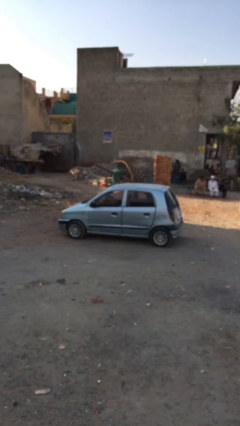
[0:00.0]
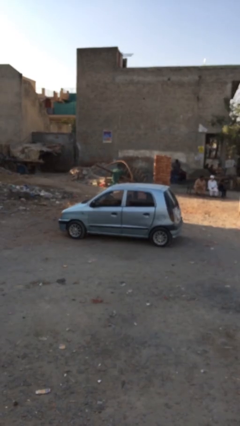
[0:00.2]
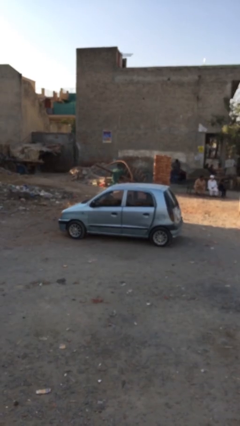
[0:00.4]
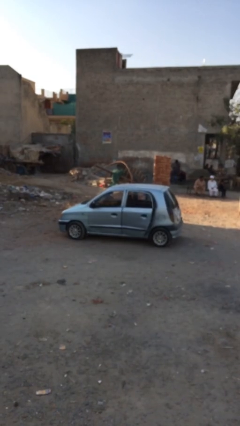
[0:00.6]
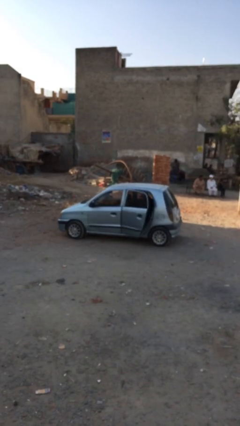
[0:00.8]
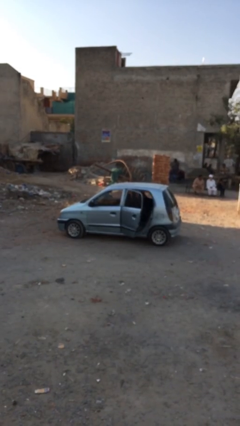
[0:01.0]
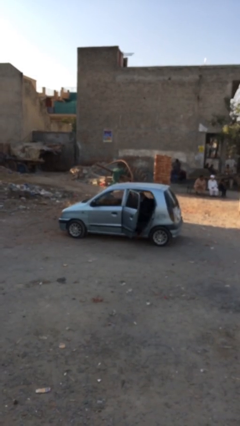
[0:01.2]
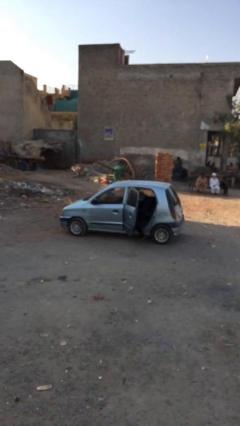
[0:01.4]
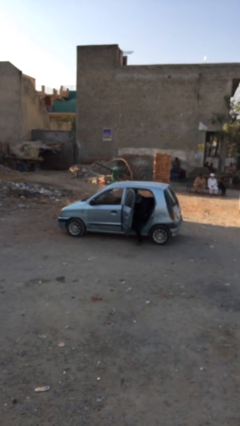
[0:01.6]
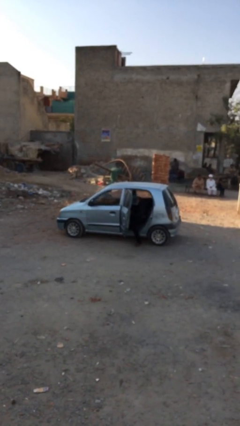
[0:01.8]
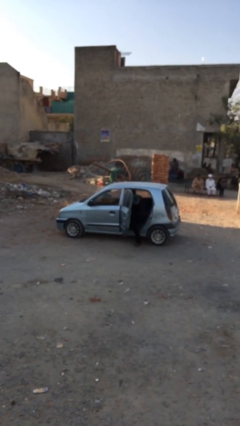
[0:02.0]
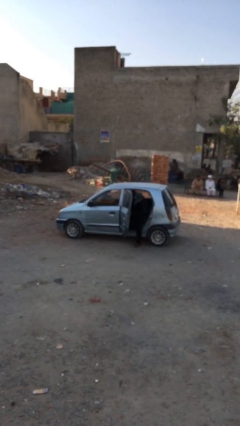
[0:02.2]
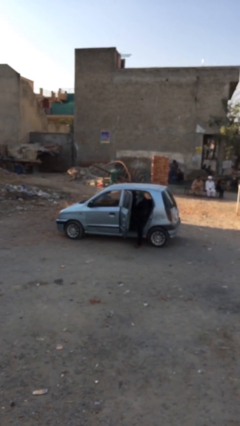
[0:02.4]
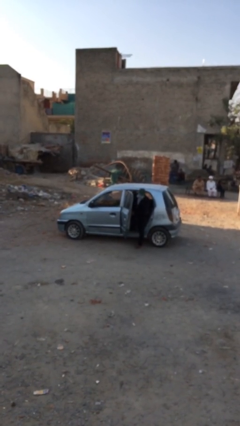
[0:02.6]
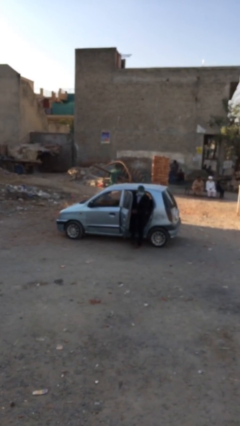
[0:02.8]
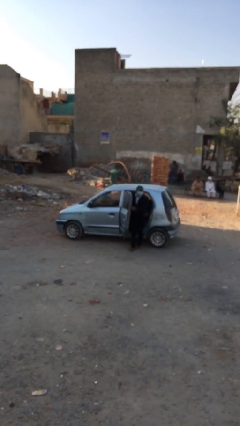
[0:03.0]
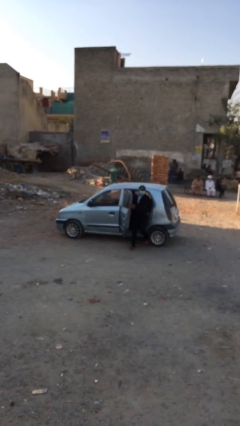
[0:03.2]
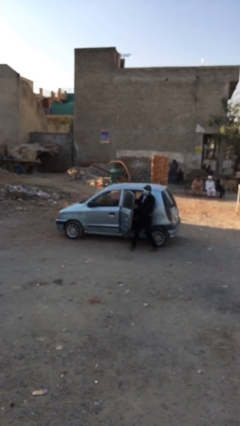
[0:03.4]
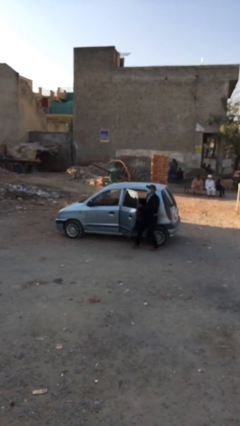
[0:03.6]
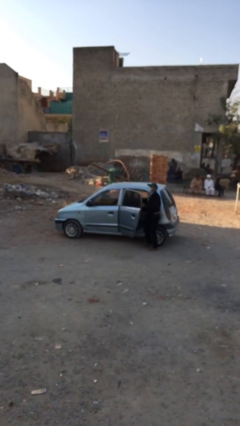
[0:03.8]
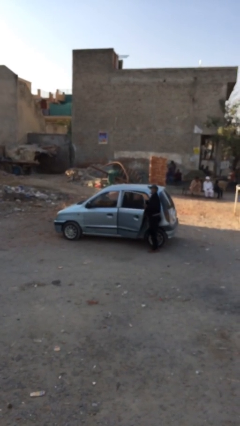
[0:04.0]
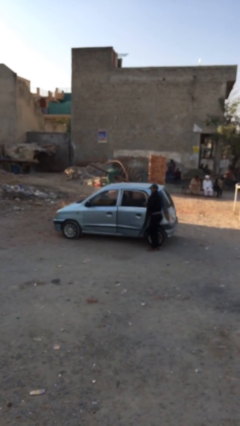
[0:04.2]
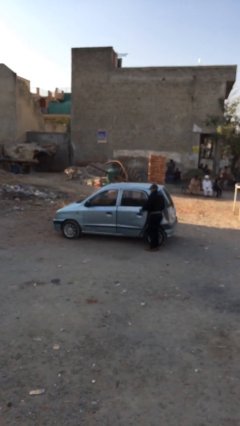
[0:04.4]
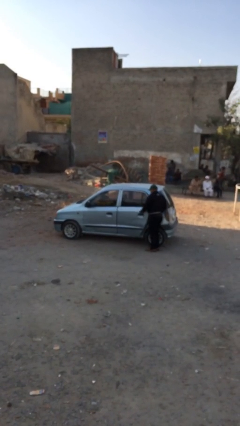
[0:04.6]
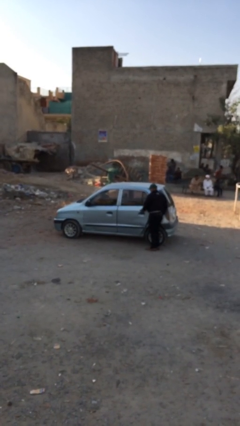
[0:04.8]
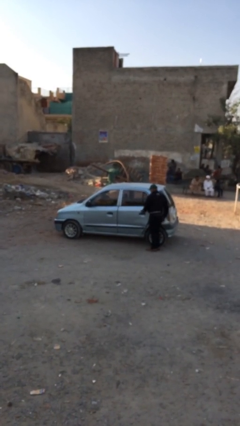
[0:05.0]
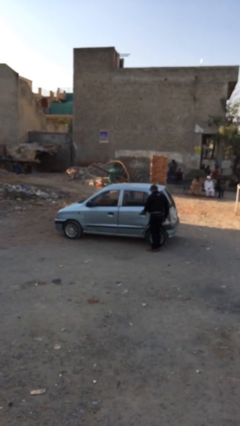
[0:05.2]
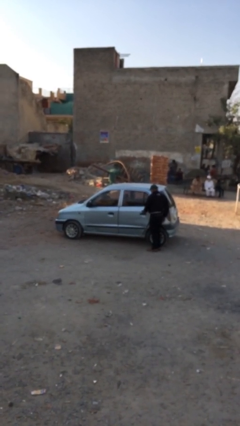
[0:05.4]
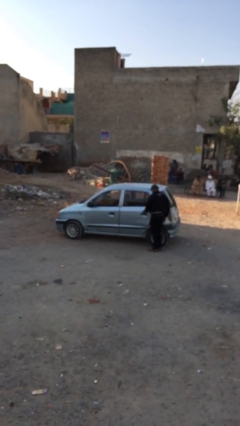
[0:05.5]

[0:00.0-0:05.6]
car drops off person

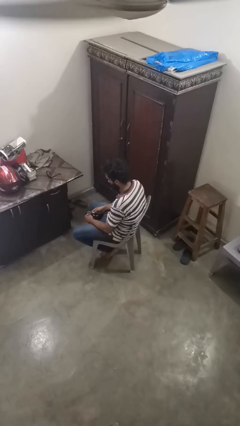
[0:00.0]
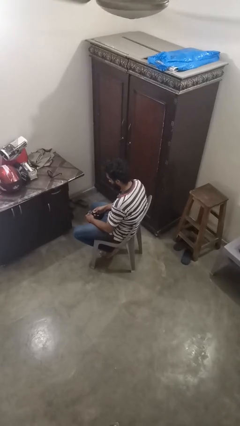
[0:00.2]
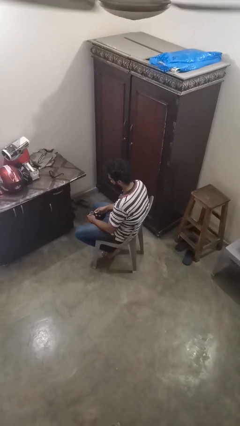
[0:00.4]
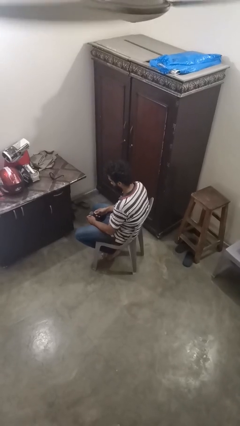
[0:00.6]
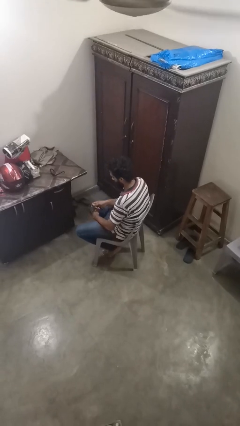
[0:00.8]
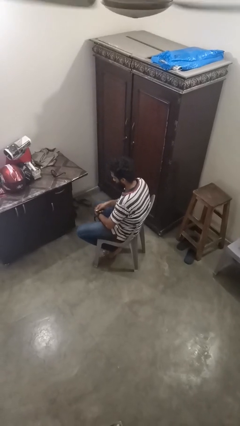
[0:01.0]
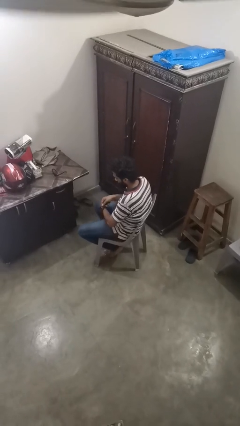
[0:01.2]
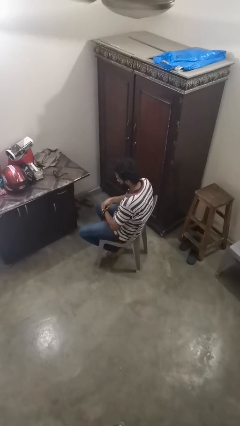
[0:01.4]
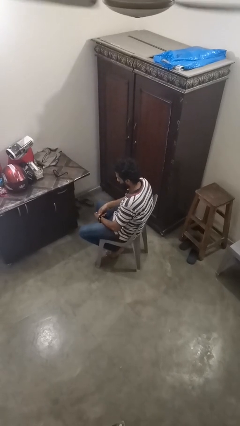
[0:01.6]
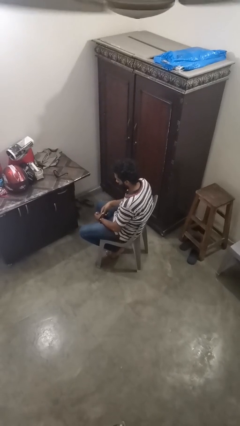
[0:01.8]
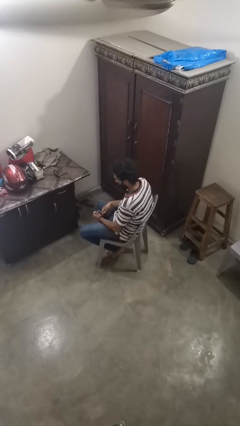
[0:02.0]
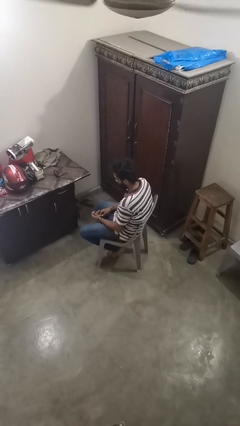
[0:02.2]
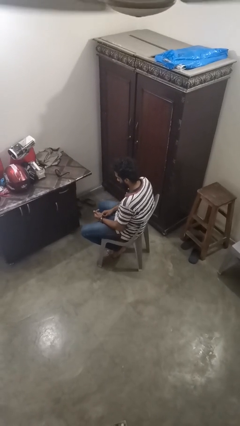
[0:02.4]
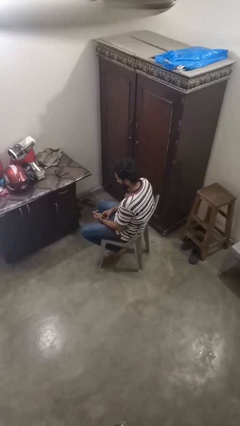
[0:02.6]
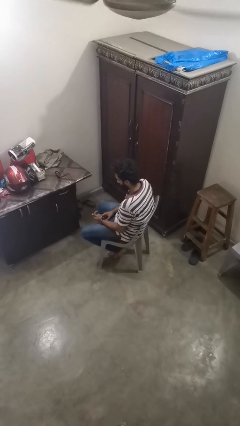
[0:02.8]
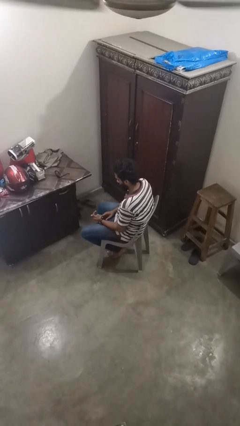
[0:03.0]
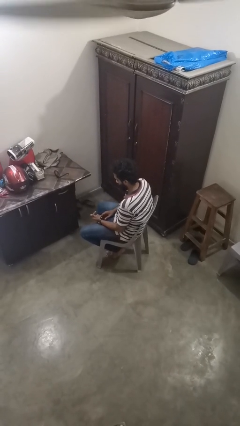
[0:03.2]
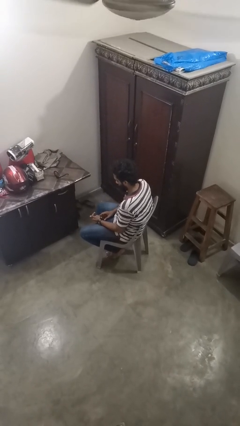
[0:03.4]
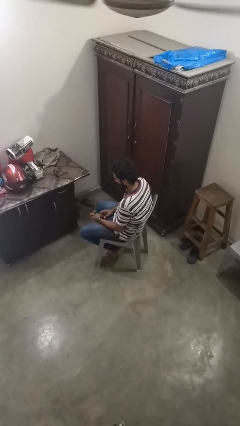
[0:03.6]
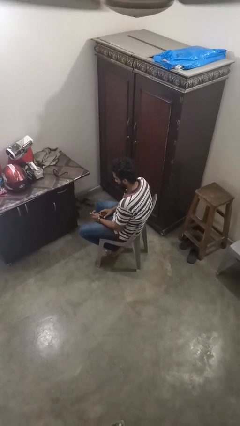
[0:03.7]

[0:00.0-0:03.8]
person puts on wristwatch

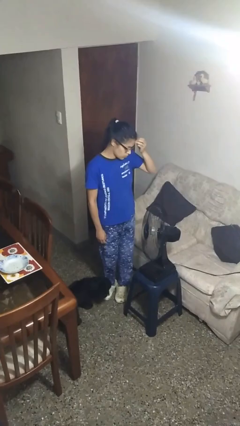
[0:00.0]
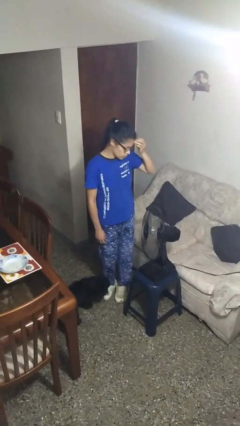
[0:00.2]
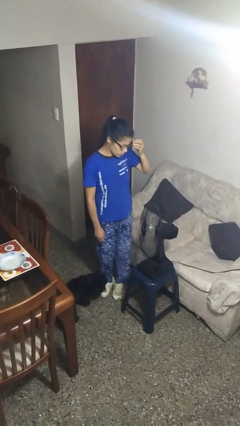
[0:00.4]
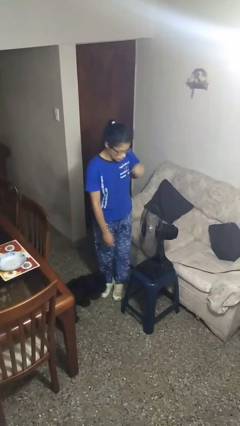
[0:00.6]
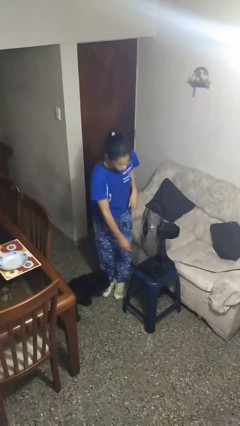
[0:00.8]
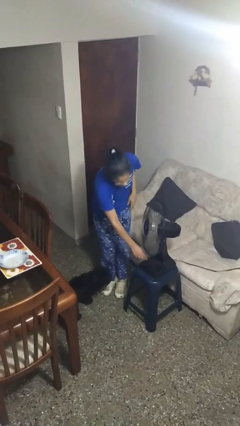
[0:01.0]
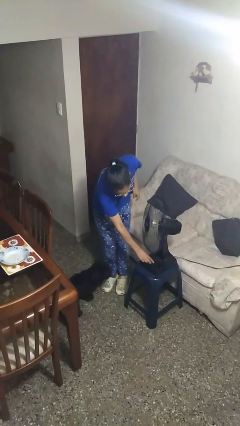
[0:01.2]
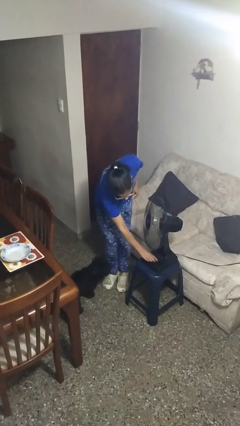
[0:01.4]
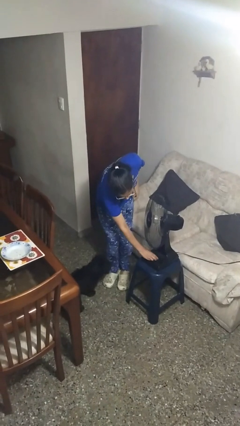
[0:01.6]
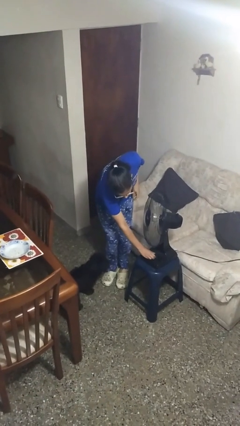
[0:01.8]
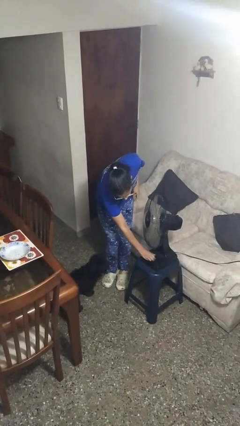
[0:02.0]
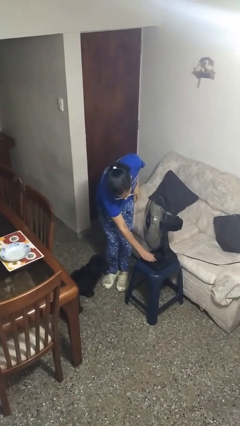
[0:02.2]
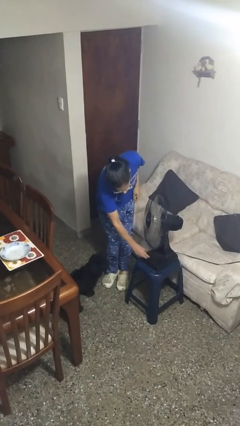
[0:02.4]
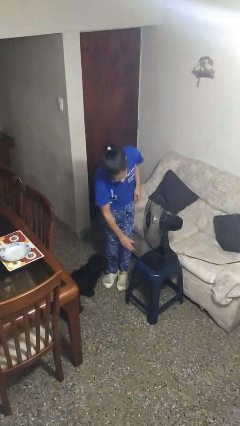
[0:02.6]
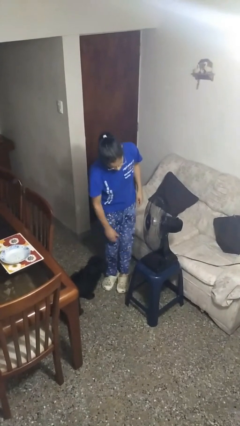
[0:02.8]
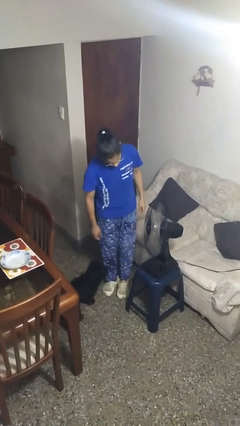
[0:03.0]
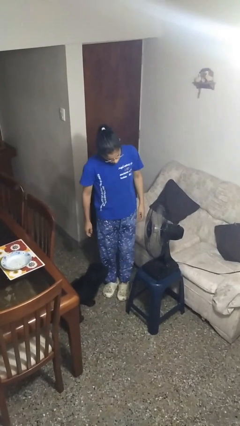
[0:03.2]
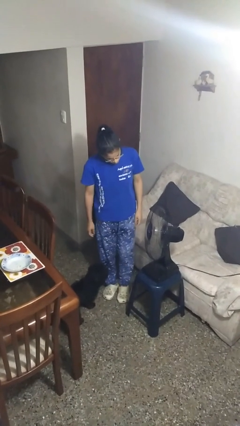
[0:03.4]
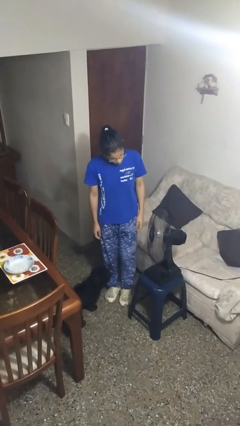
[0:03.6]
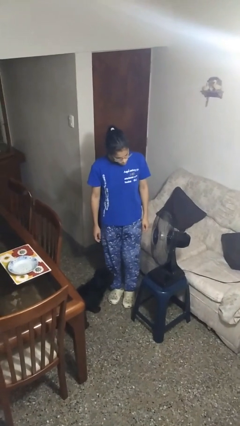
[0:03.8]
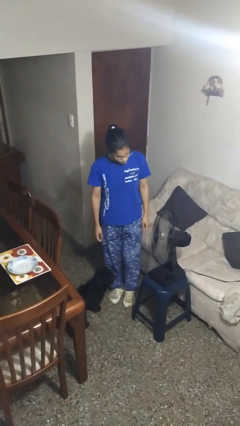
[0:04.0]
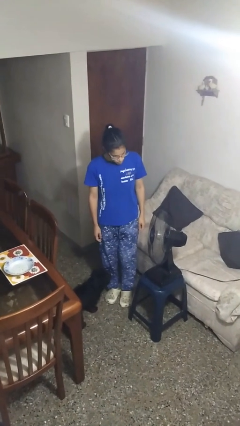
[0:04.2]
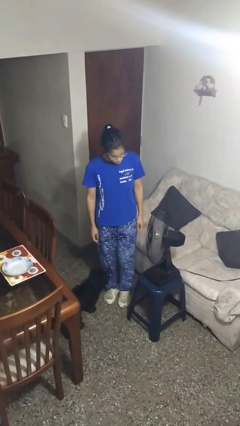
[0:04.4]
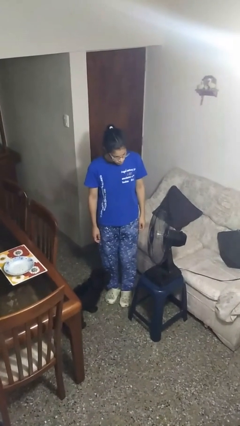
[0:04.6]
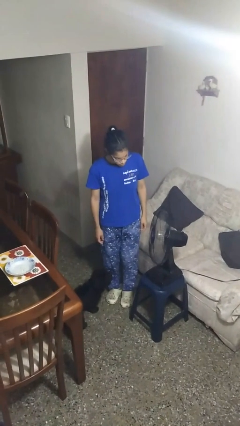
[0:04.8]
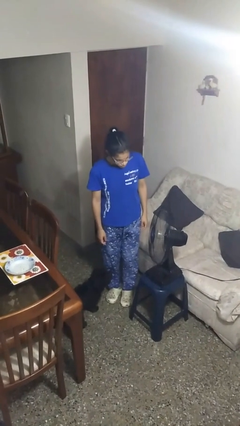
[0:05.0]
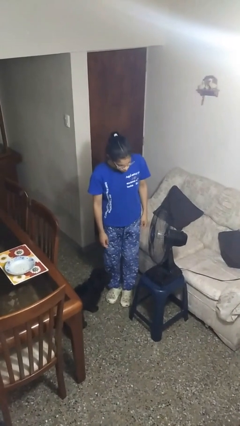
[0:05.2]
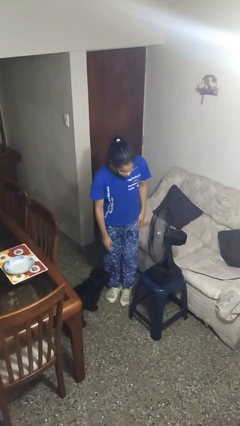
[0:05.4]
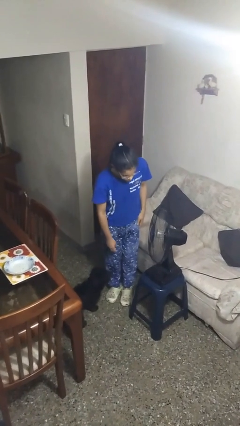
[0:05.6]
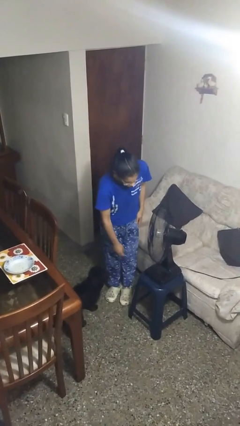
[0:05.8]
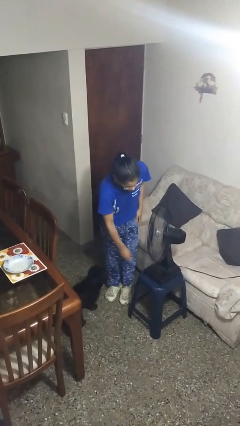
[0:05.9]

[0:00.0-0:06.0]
person turns on fan

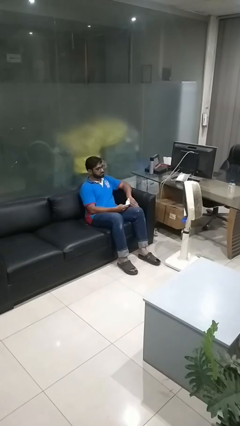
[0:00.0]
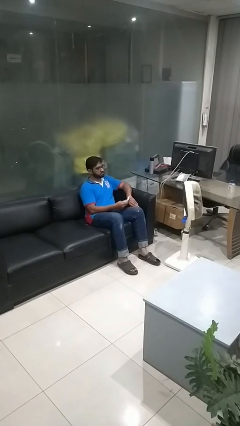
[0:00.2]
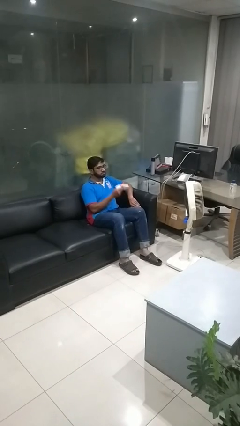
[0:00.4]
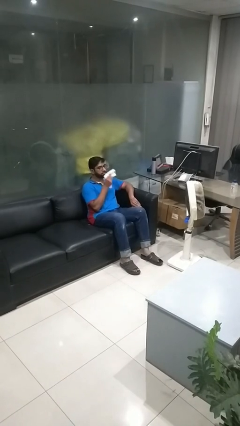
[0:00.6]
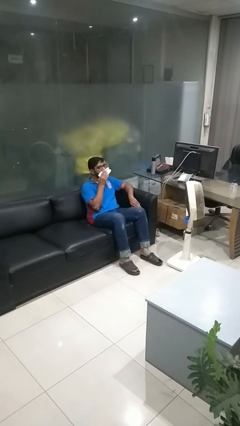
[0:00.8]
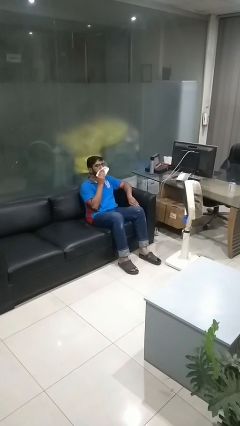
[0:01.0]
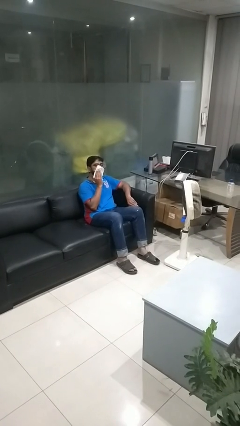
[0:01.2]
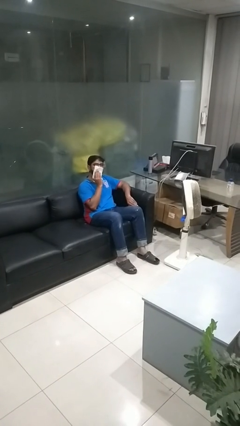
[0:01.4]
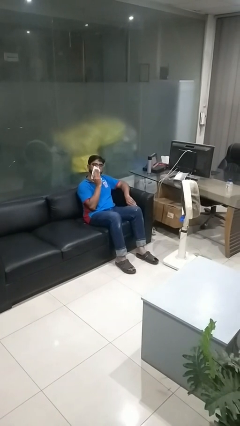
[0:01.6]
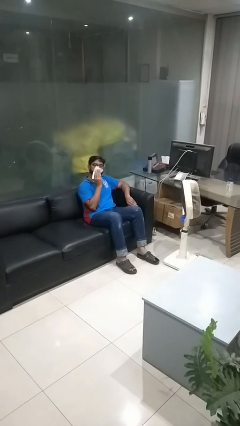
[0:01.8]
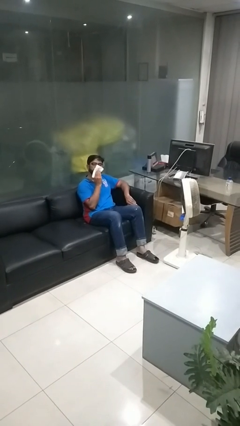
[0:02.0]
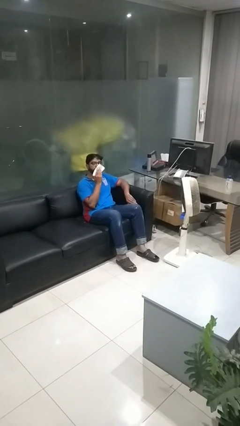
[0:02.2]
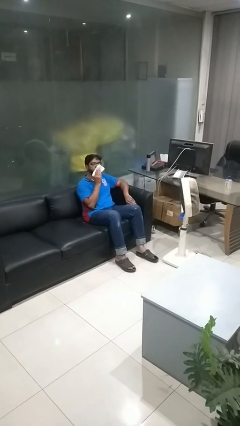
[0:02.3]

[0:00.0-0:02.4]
person wipes mouth with napkin
